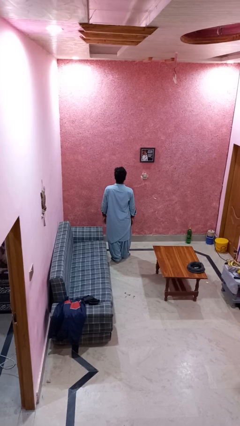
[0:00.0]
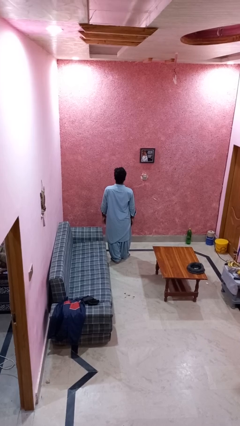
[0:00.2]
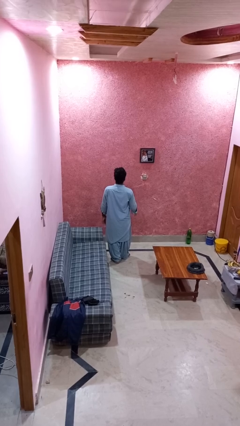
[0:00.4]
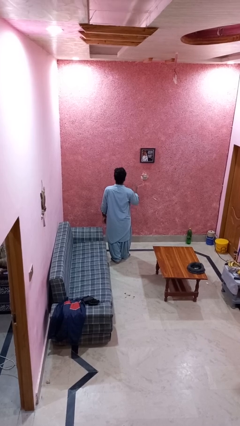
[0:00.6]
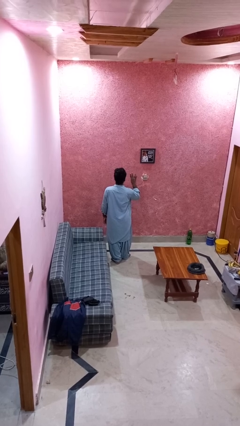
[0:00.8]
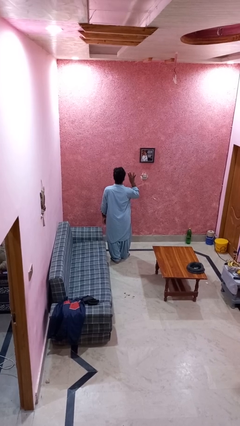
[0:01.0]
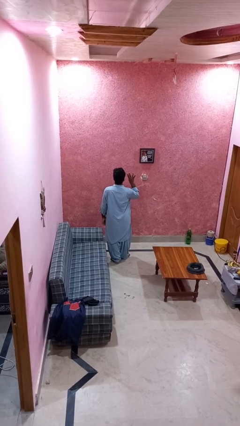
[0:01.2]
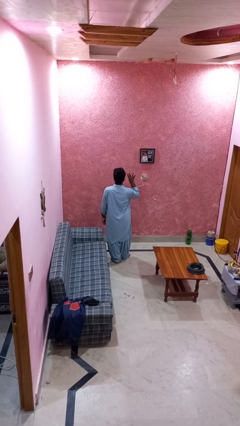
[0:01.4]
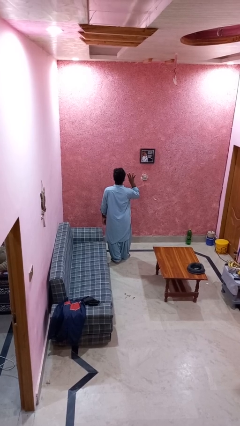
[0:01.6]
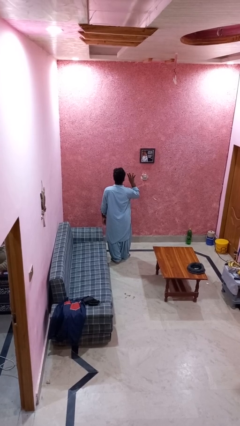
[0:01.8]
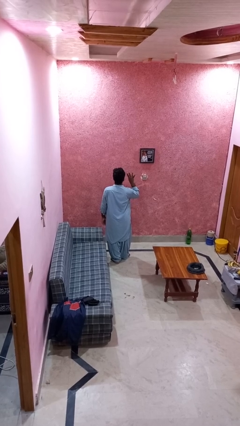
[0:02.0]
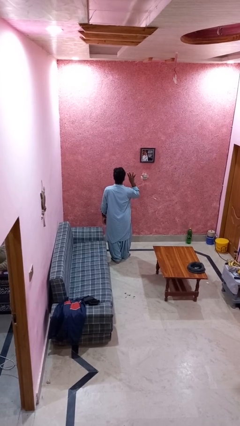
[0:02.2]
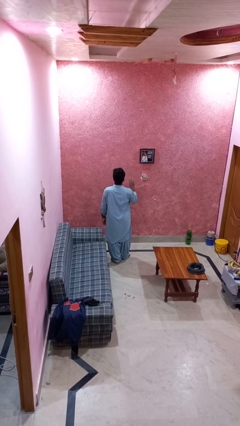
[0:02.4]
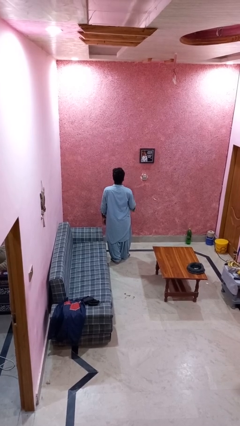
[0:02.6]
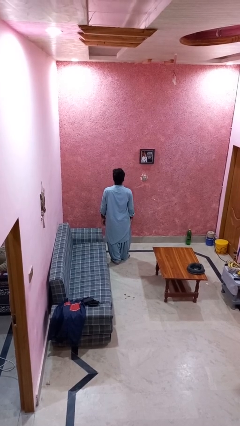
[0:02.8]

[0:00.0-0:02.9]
person gestures number four

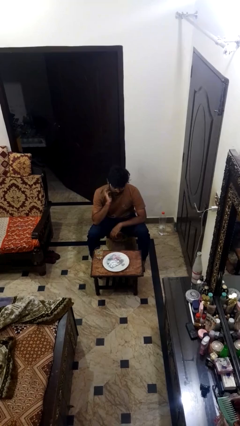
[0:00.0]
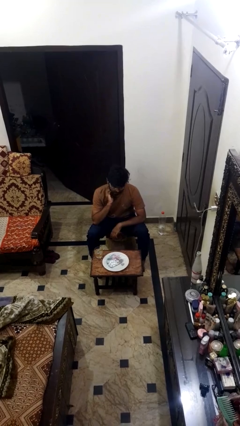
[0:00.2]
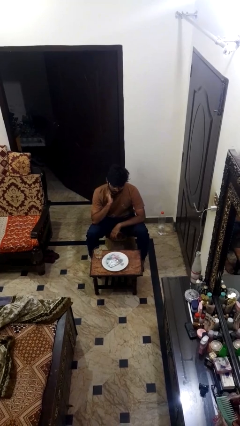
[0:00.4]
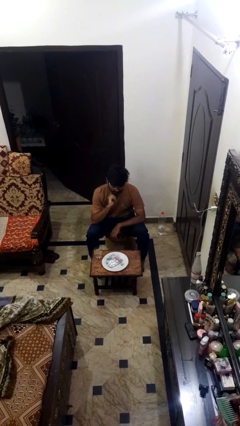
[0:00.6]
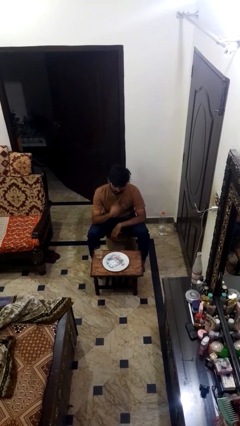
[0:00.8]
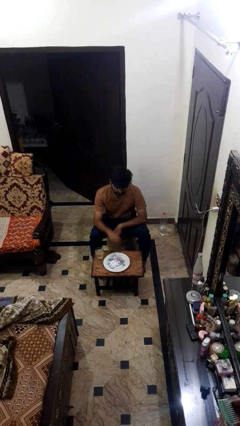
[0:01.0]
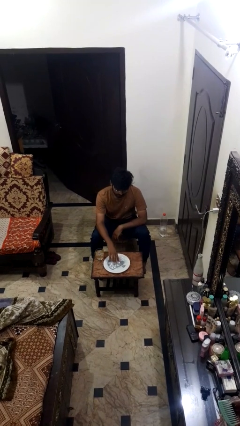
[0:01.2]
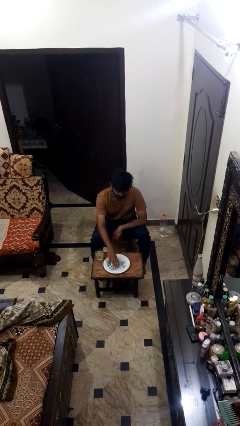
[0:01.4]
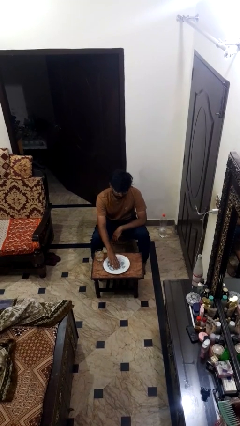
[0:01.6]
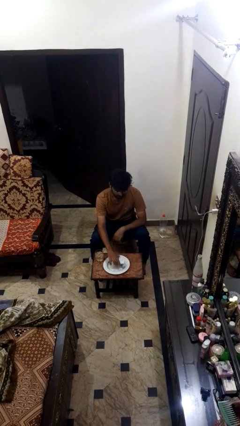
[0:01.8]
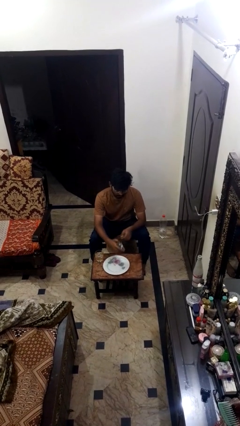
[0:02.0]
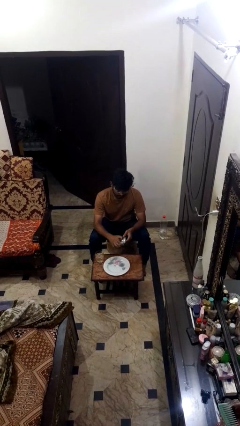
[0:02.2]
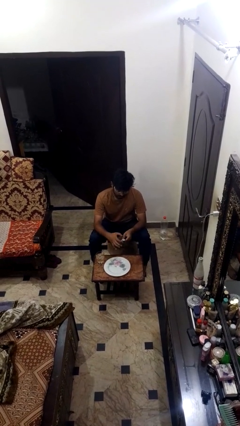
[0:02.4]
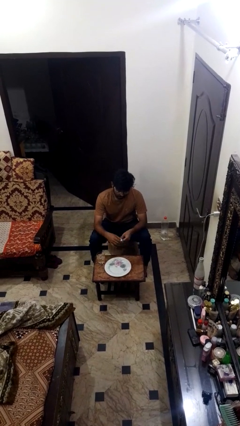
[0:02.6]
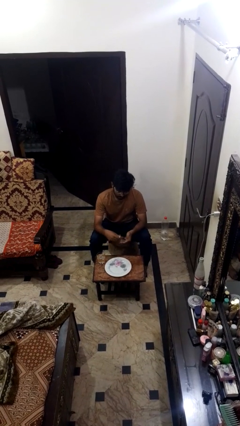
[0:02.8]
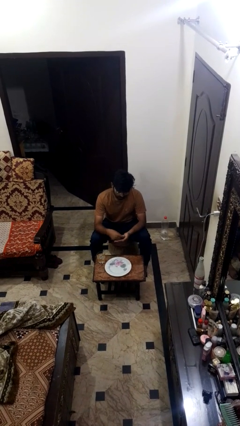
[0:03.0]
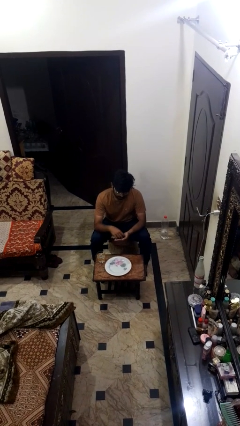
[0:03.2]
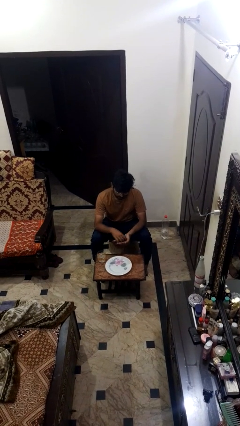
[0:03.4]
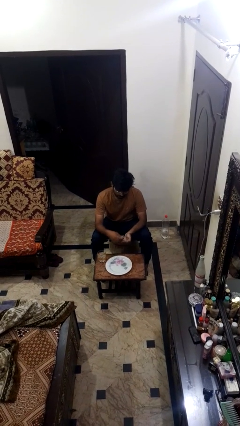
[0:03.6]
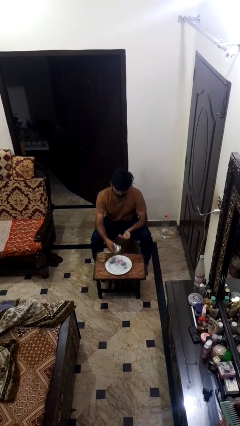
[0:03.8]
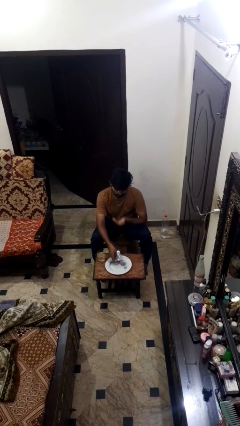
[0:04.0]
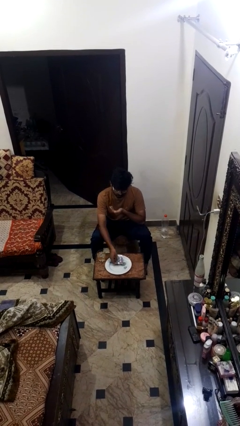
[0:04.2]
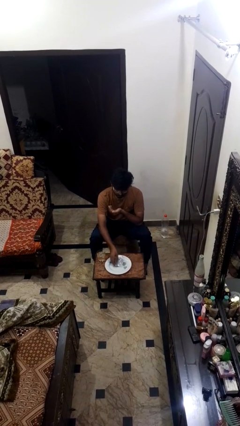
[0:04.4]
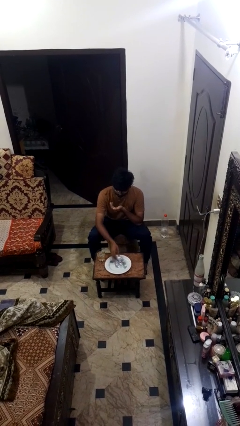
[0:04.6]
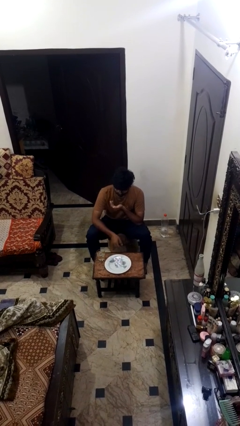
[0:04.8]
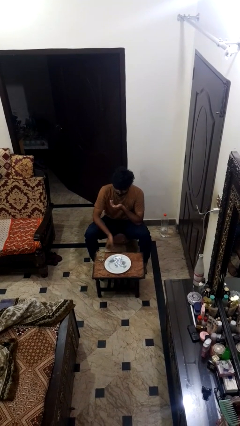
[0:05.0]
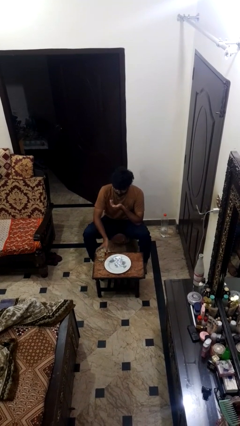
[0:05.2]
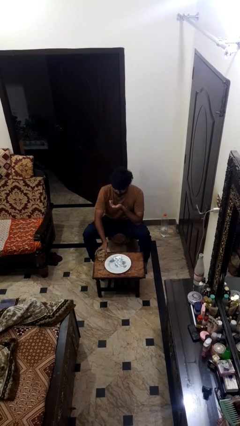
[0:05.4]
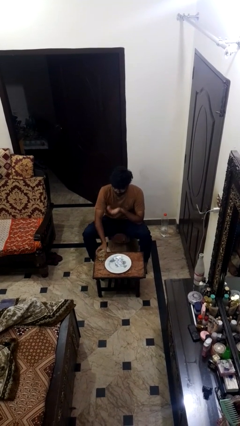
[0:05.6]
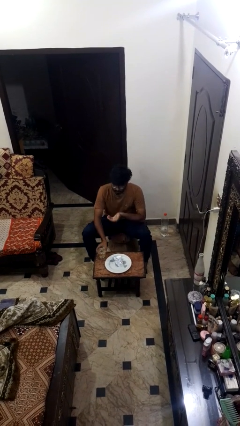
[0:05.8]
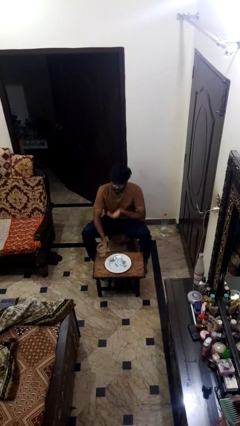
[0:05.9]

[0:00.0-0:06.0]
person takes medicine pills

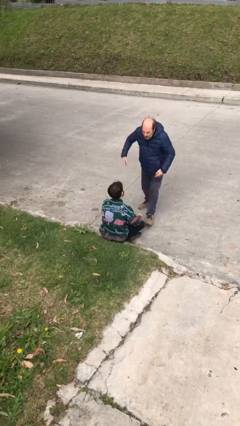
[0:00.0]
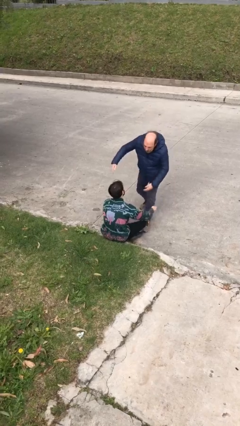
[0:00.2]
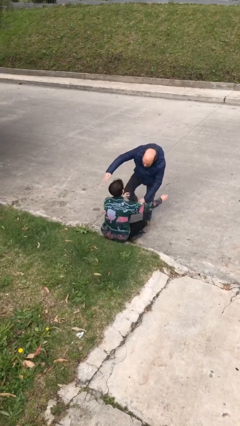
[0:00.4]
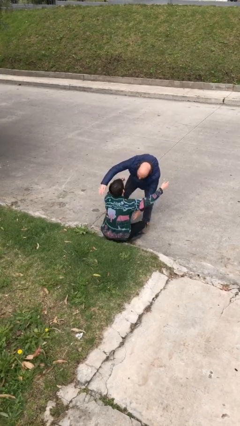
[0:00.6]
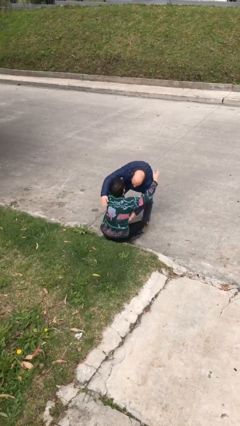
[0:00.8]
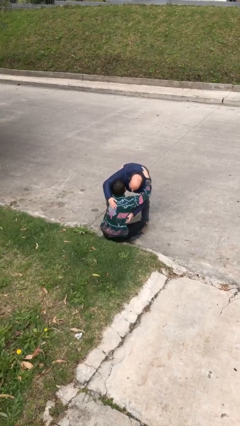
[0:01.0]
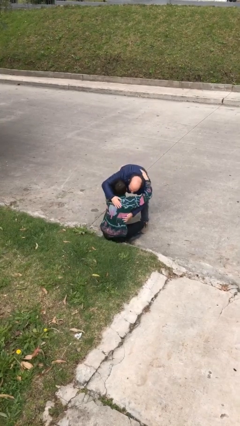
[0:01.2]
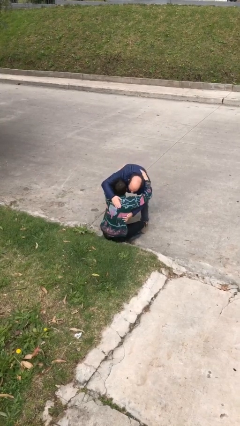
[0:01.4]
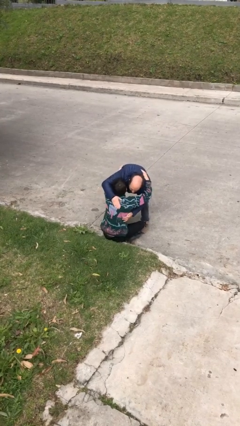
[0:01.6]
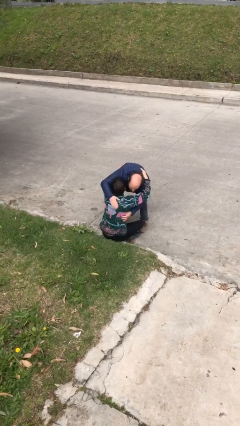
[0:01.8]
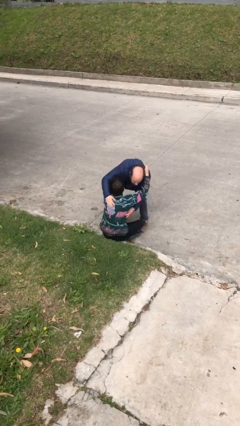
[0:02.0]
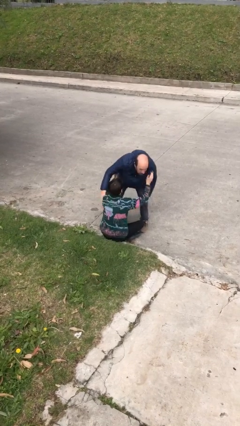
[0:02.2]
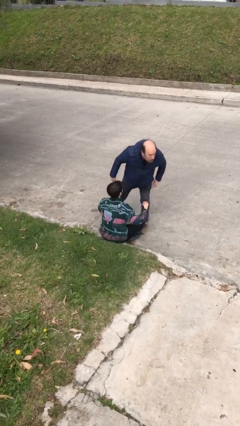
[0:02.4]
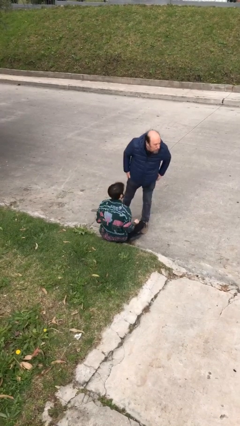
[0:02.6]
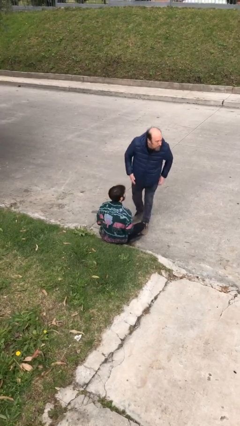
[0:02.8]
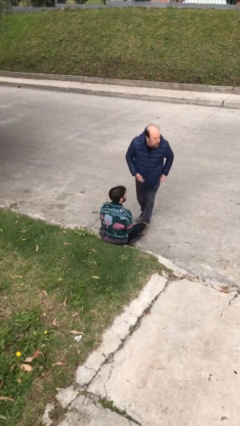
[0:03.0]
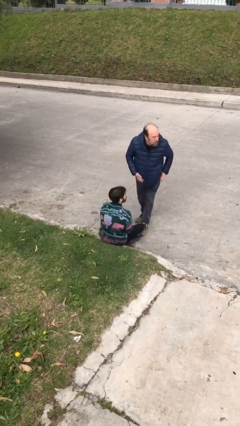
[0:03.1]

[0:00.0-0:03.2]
person embraces person

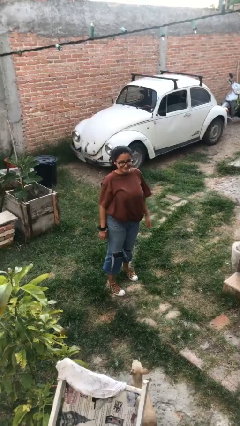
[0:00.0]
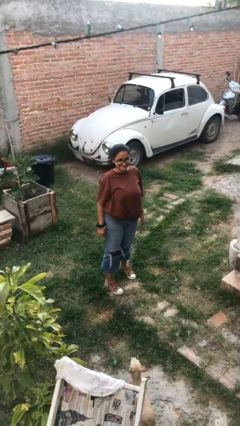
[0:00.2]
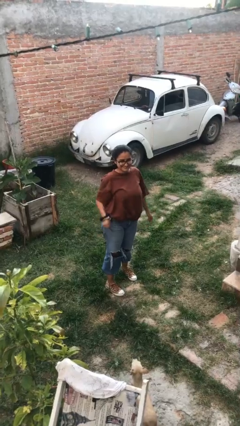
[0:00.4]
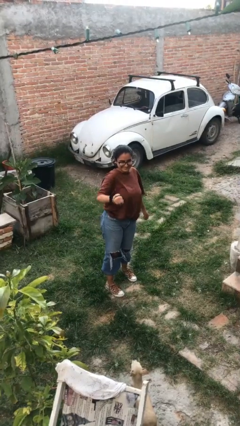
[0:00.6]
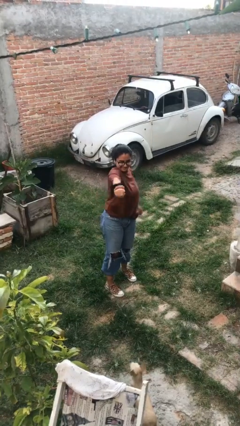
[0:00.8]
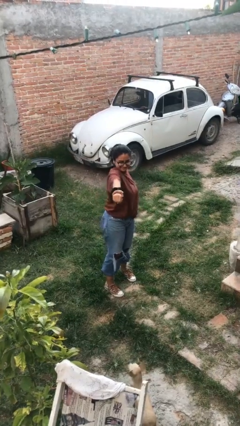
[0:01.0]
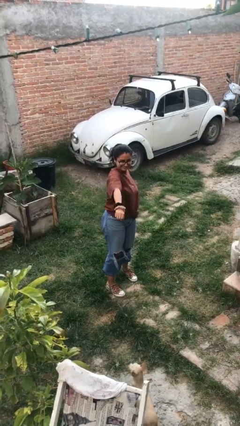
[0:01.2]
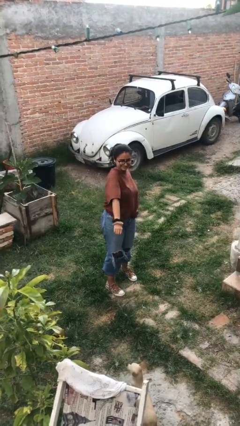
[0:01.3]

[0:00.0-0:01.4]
person karate chop

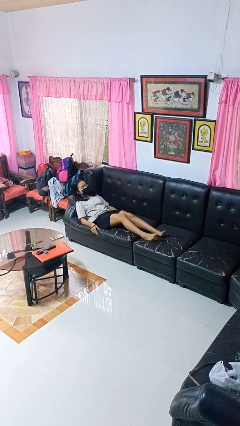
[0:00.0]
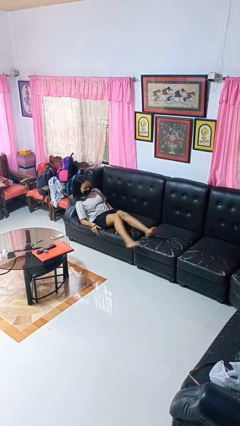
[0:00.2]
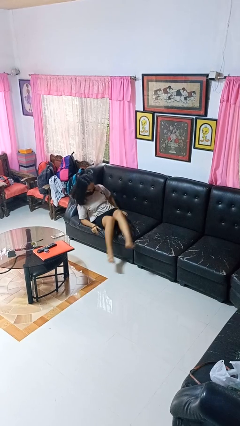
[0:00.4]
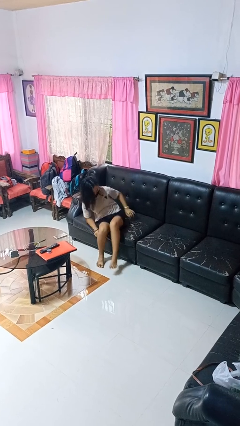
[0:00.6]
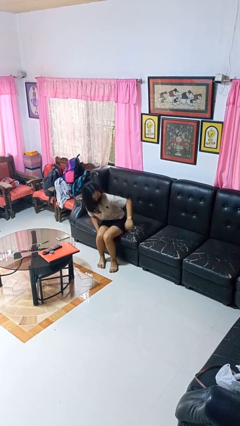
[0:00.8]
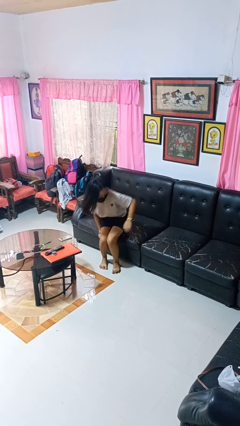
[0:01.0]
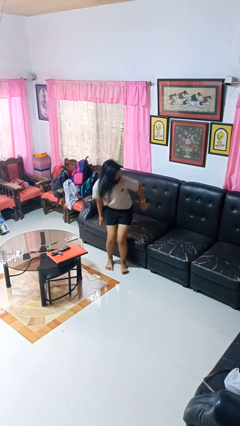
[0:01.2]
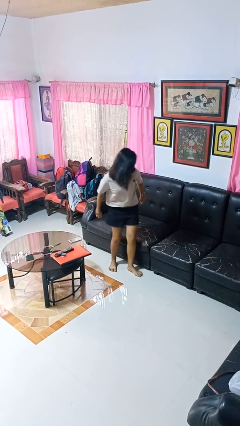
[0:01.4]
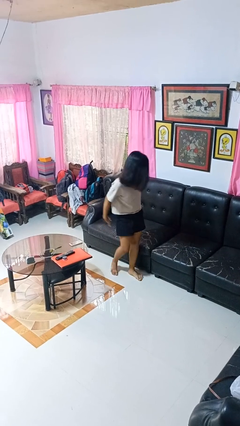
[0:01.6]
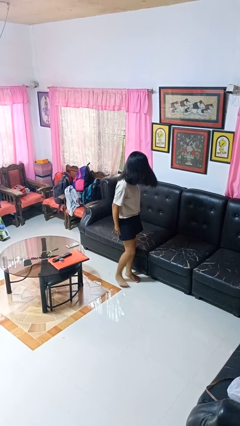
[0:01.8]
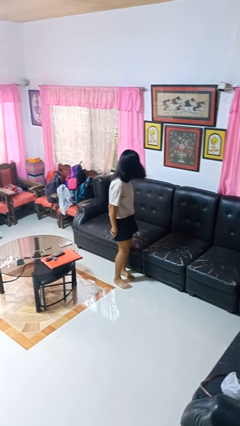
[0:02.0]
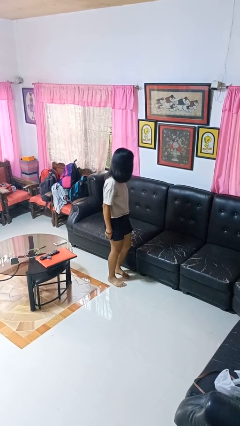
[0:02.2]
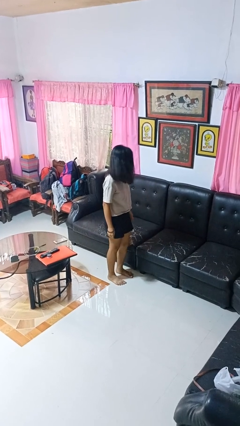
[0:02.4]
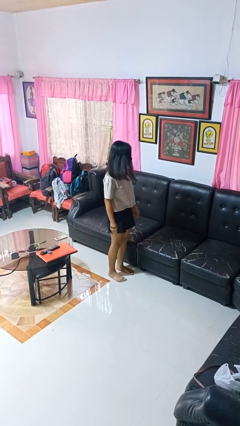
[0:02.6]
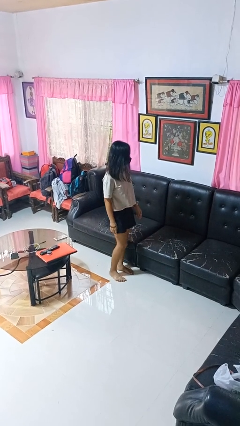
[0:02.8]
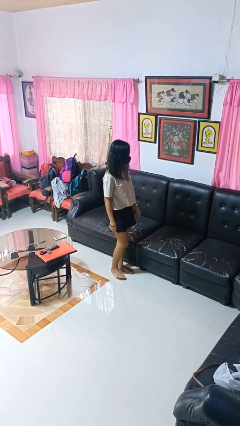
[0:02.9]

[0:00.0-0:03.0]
person stands up

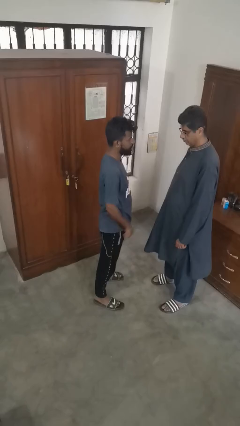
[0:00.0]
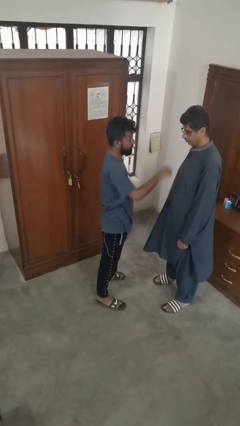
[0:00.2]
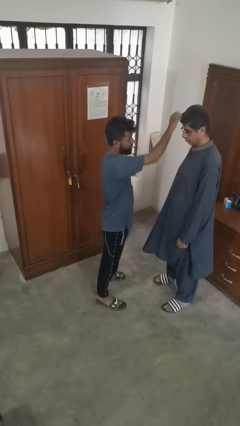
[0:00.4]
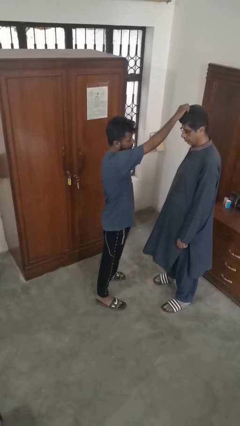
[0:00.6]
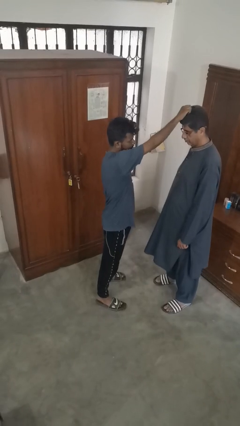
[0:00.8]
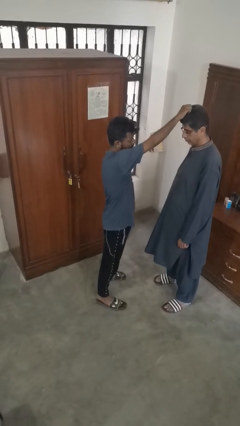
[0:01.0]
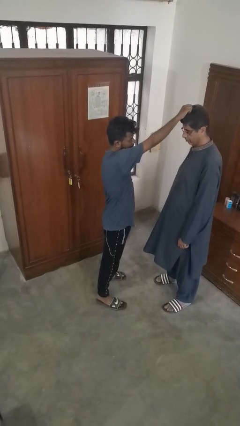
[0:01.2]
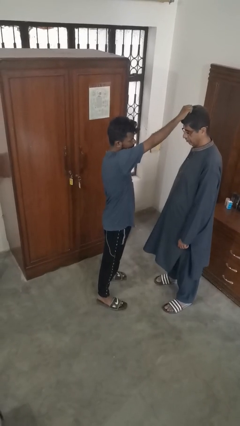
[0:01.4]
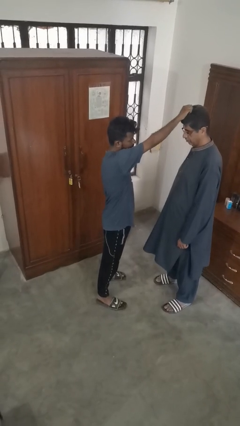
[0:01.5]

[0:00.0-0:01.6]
person grabs person by hair
